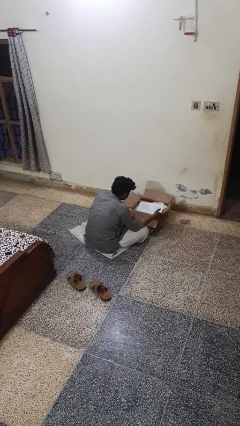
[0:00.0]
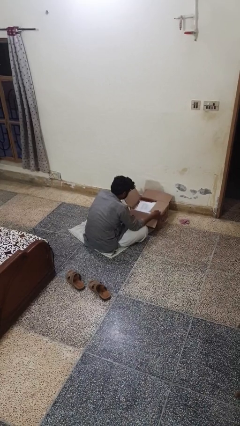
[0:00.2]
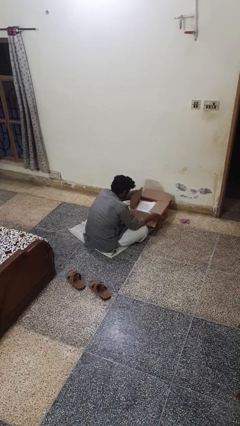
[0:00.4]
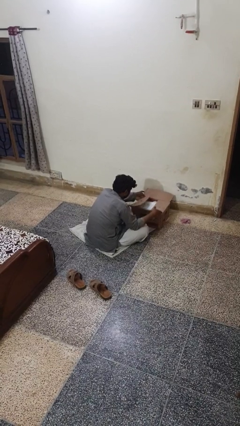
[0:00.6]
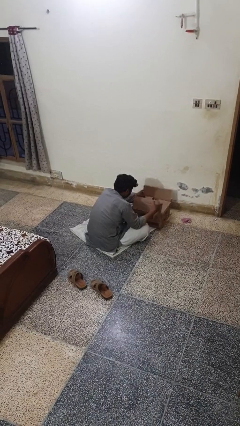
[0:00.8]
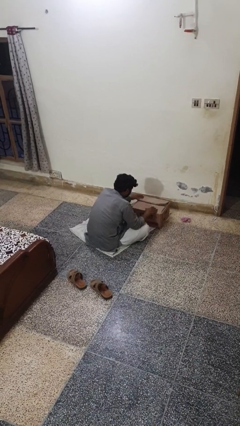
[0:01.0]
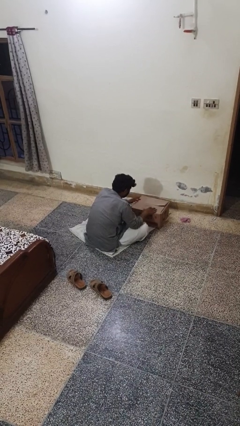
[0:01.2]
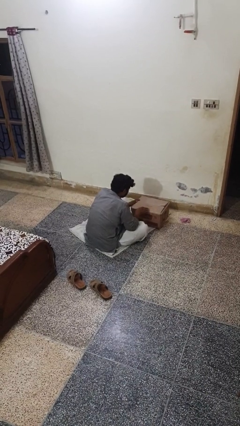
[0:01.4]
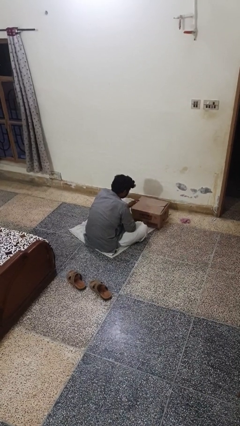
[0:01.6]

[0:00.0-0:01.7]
person closes box

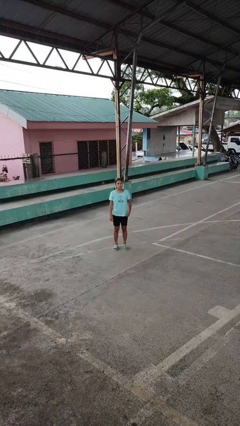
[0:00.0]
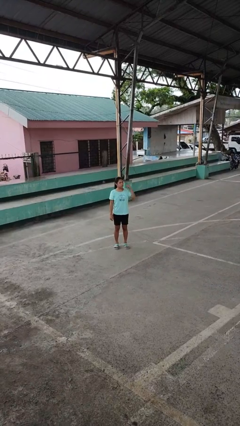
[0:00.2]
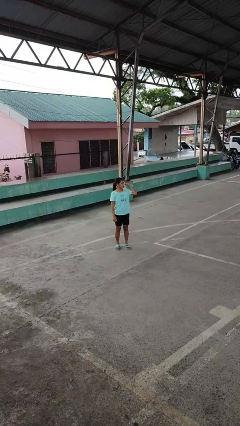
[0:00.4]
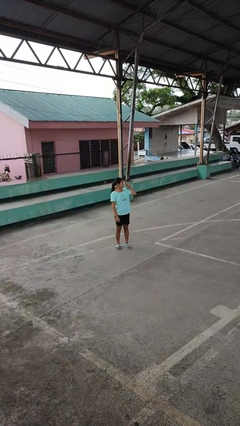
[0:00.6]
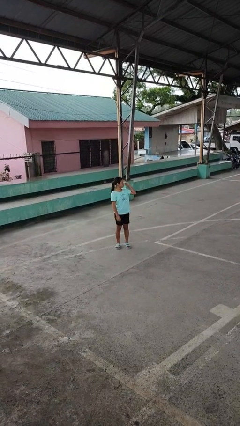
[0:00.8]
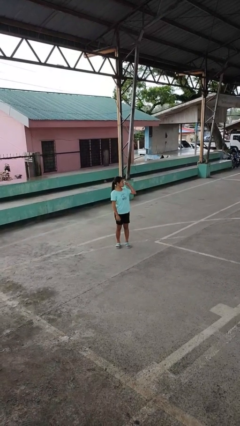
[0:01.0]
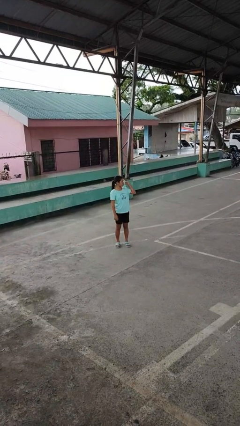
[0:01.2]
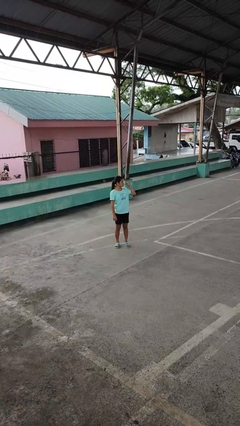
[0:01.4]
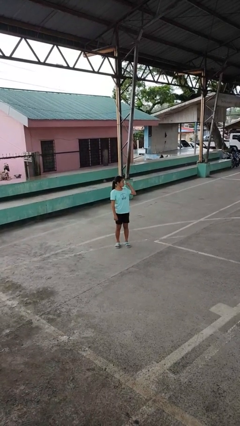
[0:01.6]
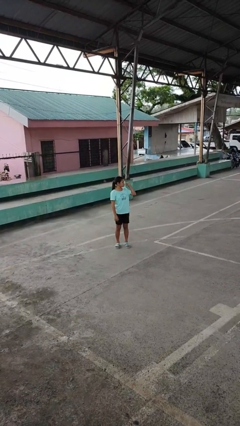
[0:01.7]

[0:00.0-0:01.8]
person gestures behind me
